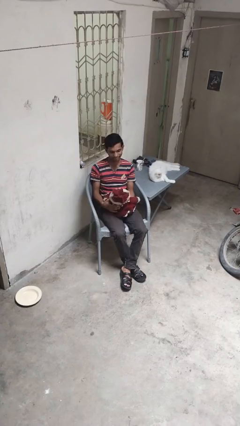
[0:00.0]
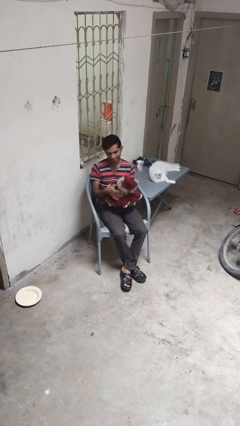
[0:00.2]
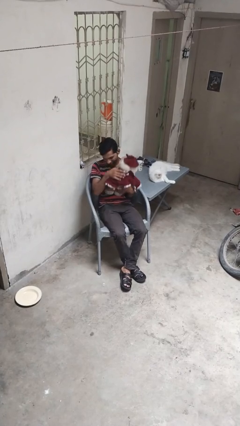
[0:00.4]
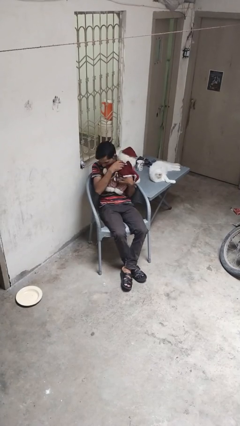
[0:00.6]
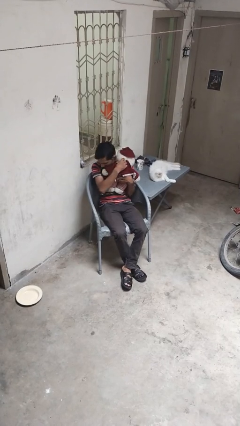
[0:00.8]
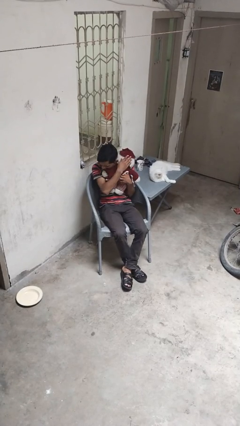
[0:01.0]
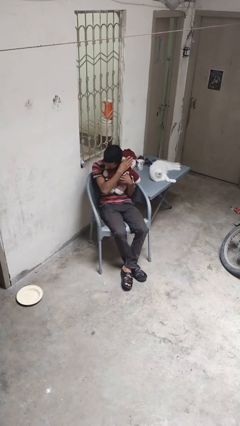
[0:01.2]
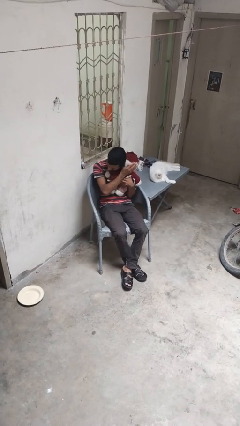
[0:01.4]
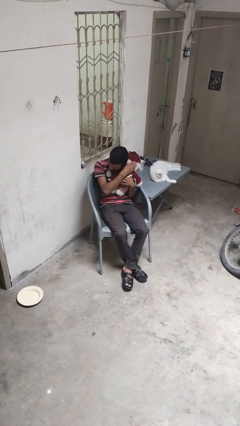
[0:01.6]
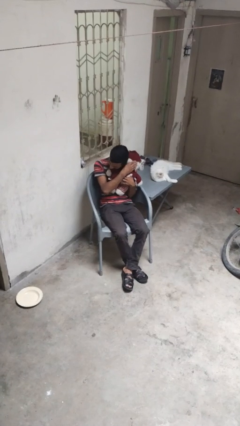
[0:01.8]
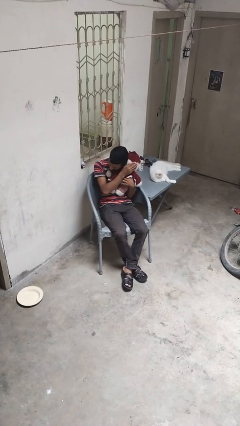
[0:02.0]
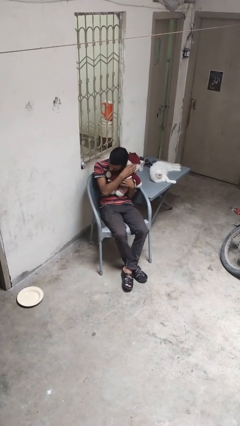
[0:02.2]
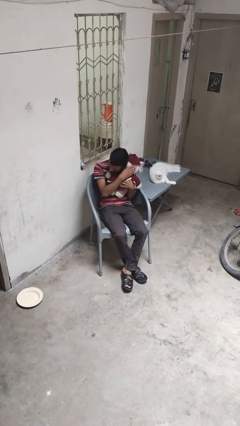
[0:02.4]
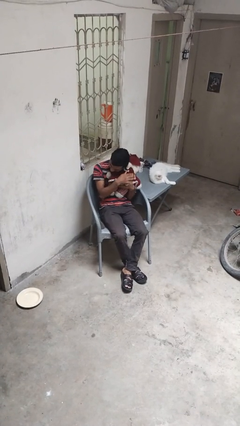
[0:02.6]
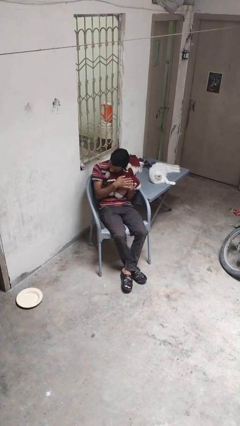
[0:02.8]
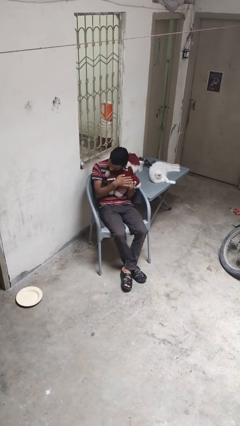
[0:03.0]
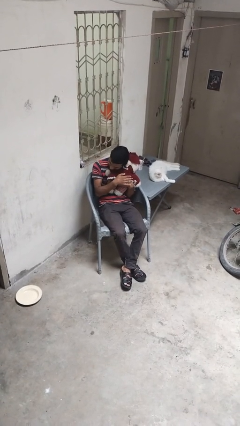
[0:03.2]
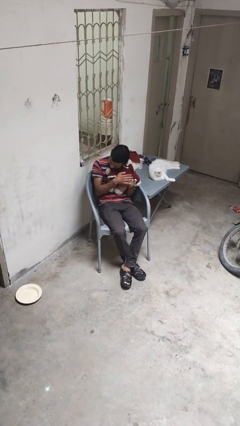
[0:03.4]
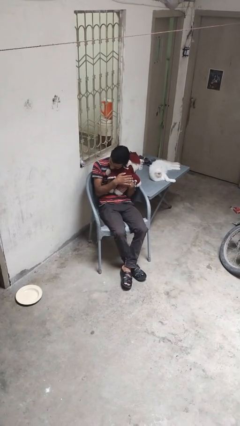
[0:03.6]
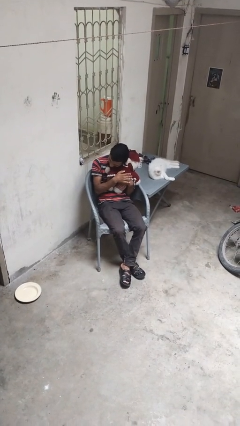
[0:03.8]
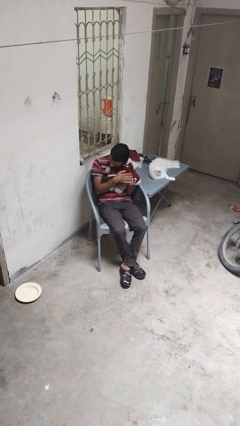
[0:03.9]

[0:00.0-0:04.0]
person hugs stuffed animal

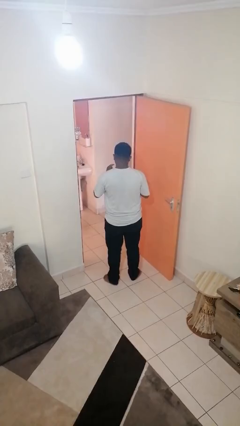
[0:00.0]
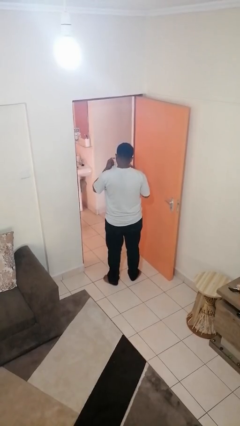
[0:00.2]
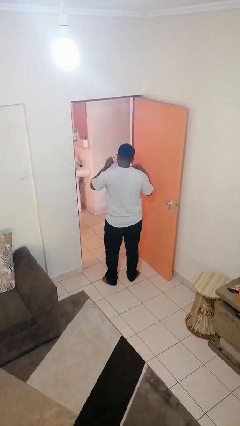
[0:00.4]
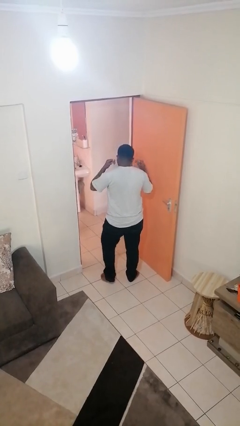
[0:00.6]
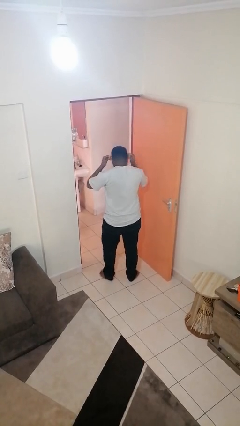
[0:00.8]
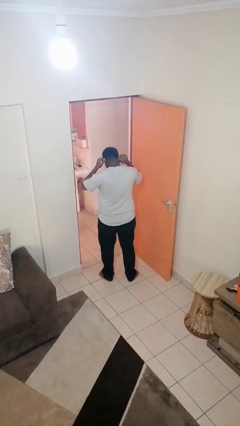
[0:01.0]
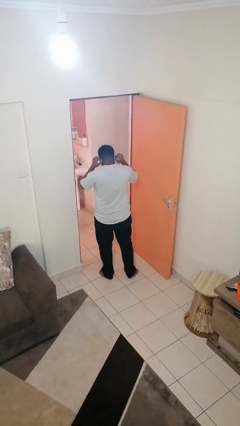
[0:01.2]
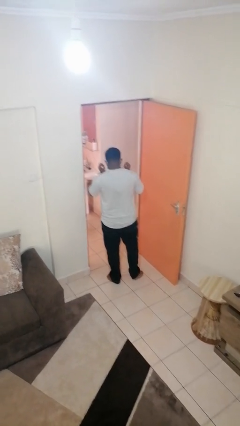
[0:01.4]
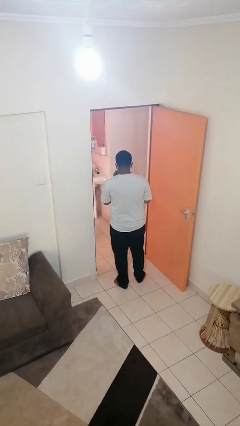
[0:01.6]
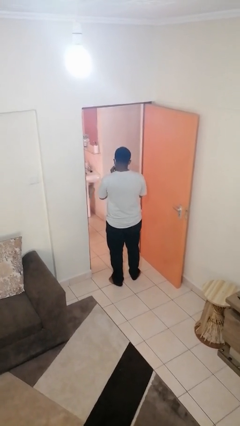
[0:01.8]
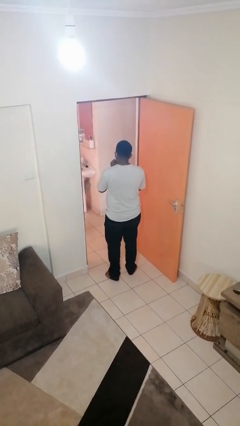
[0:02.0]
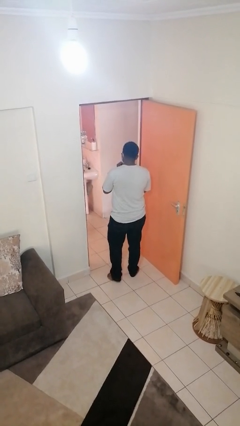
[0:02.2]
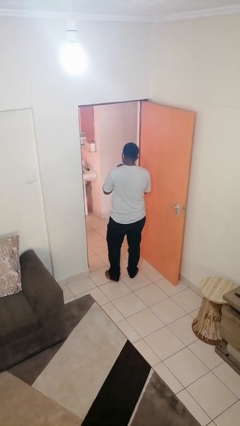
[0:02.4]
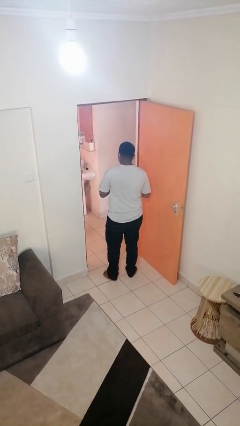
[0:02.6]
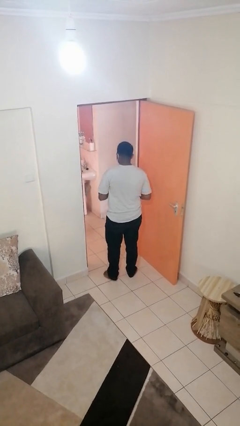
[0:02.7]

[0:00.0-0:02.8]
person puts on facemask

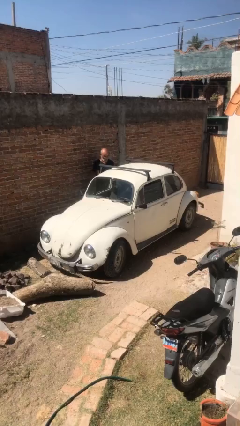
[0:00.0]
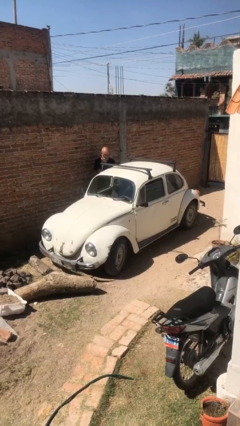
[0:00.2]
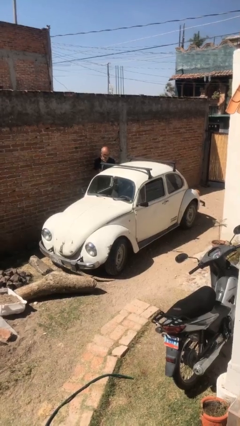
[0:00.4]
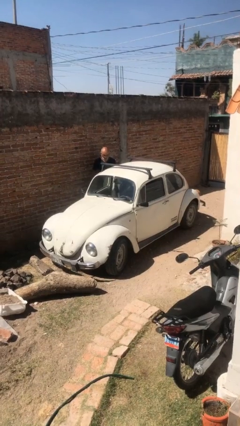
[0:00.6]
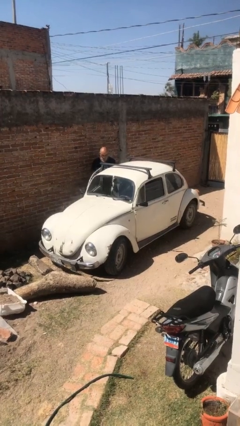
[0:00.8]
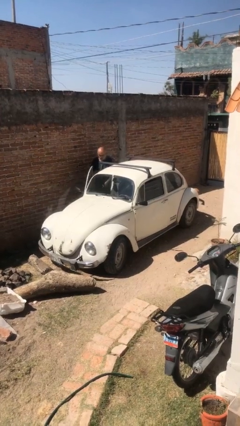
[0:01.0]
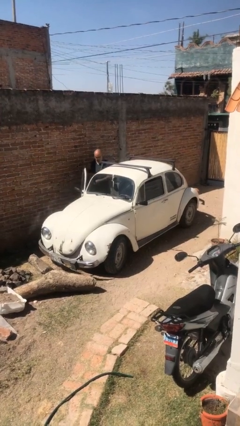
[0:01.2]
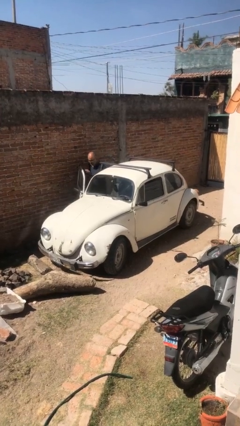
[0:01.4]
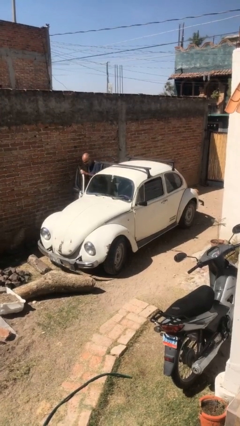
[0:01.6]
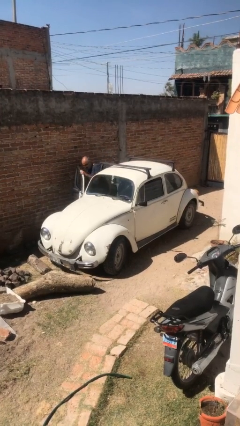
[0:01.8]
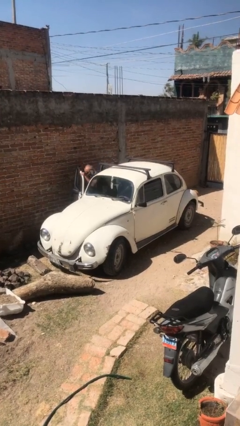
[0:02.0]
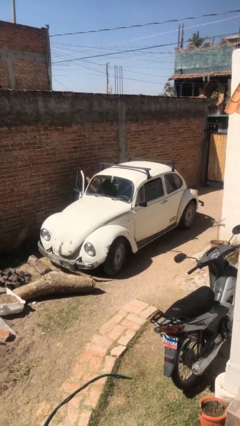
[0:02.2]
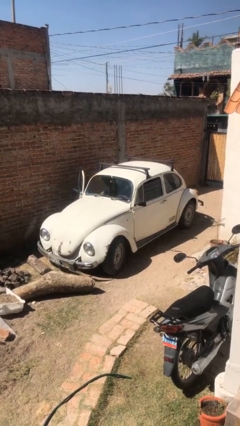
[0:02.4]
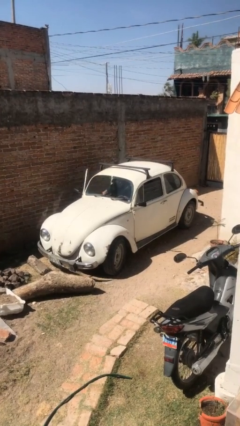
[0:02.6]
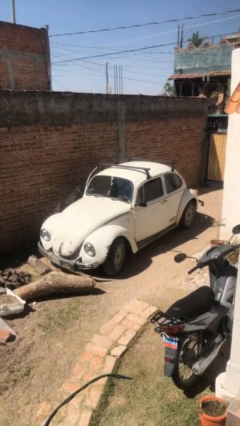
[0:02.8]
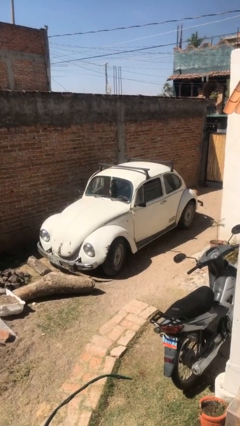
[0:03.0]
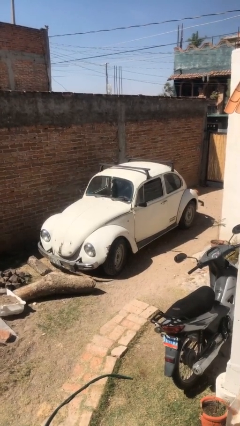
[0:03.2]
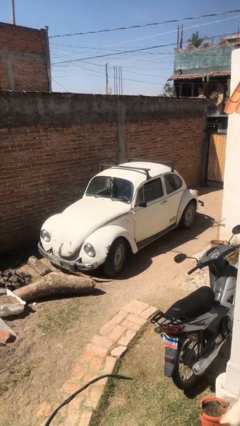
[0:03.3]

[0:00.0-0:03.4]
car picks up person

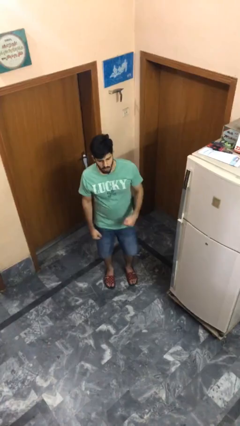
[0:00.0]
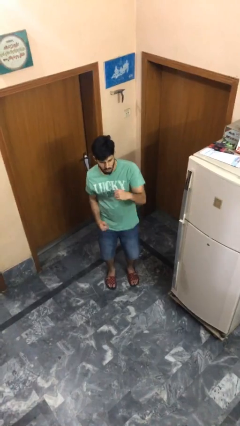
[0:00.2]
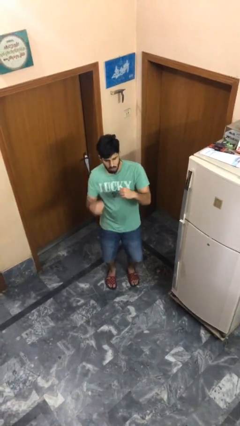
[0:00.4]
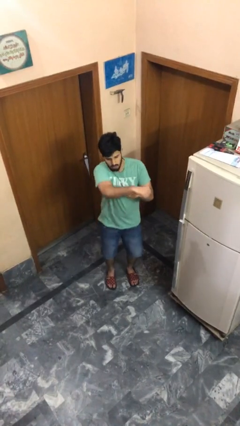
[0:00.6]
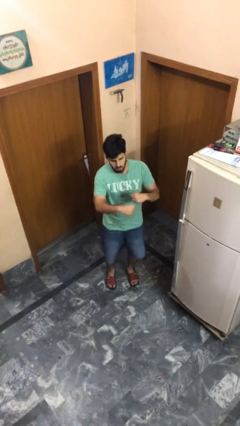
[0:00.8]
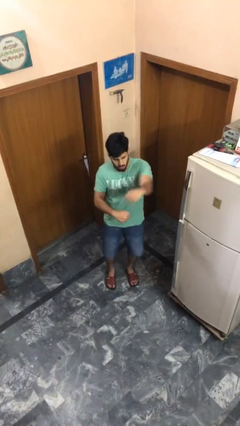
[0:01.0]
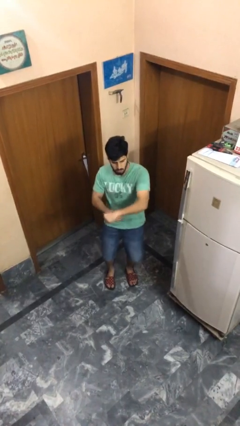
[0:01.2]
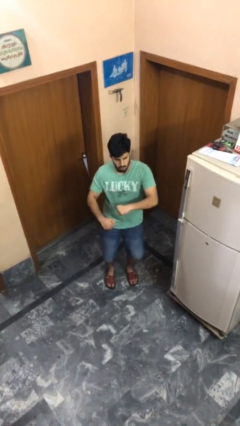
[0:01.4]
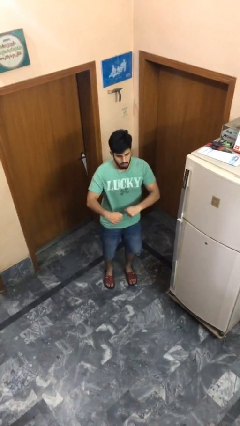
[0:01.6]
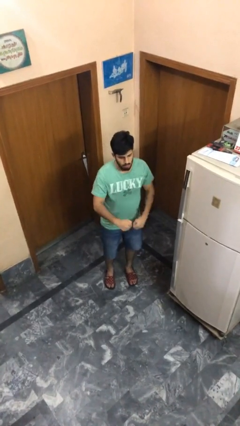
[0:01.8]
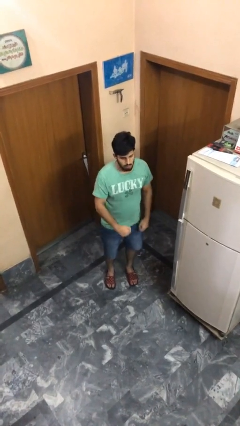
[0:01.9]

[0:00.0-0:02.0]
person punches

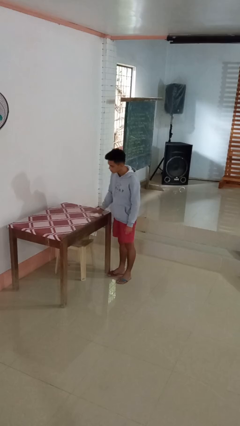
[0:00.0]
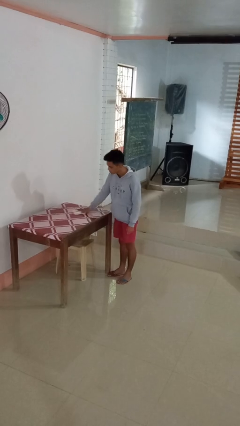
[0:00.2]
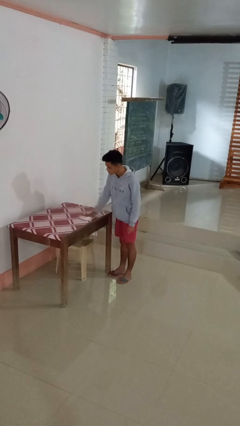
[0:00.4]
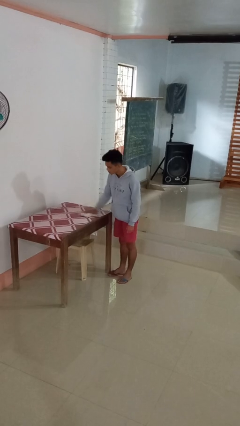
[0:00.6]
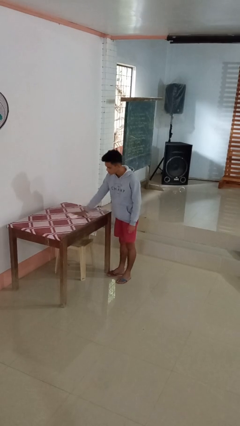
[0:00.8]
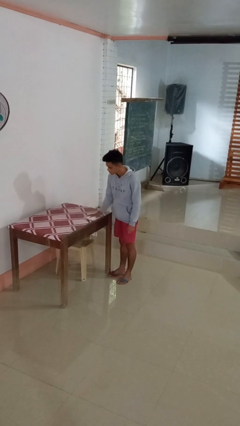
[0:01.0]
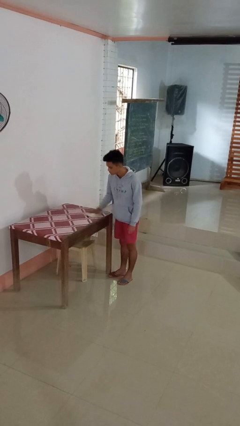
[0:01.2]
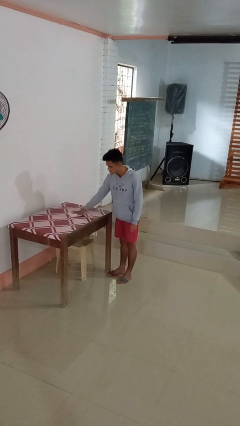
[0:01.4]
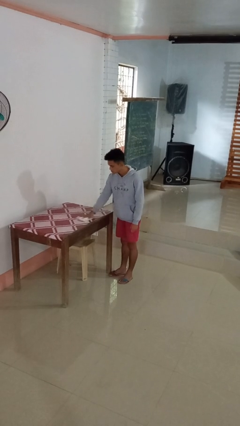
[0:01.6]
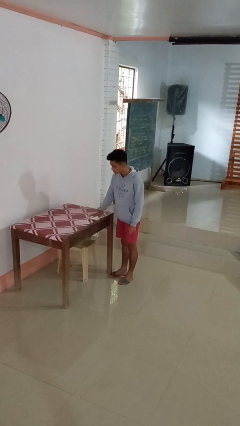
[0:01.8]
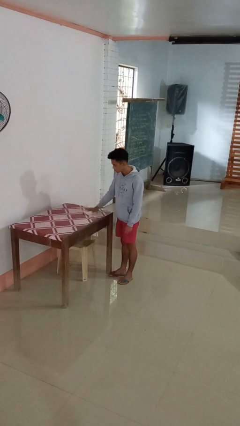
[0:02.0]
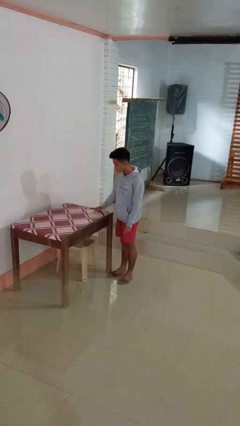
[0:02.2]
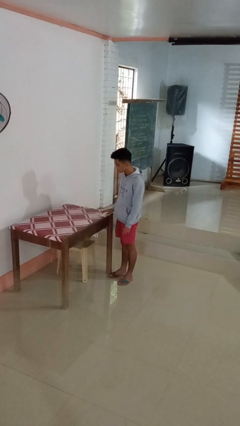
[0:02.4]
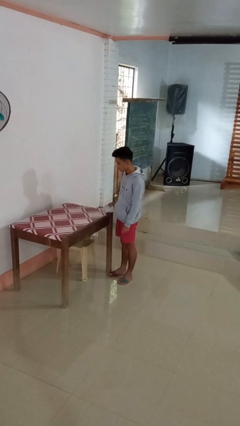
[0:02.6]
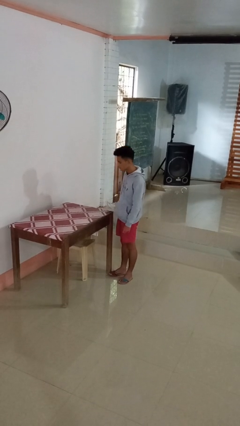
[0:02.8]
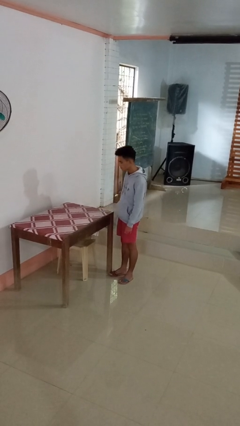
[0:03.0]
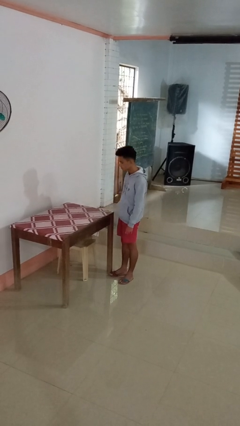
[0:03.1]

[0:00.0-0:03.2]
person cleans table with rag

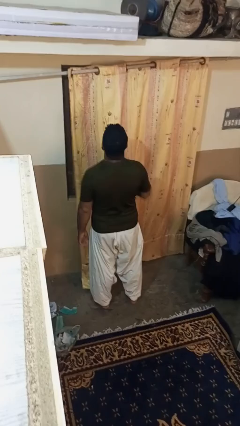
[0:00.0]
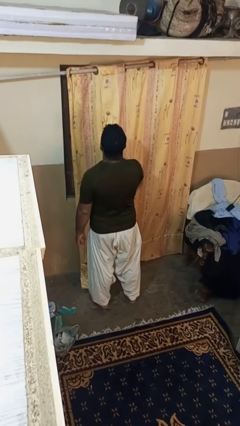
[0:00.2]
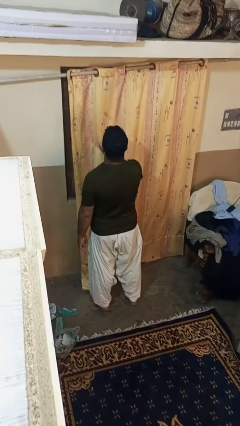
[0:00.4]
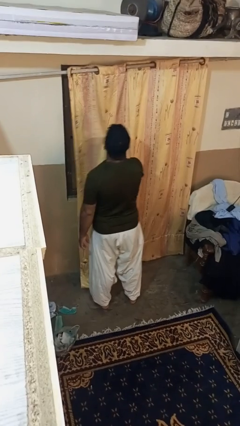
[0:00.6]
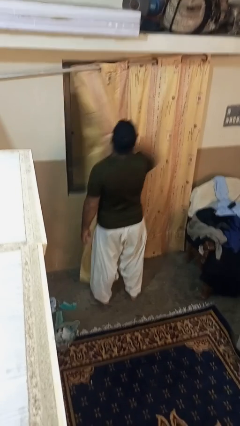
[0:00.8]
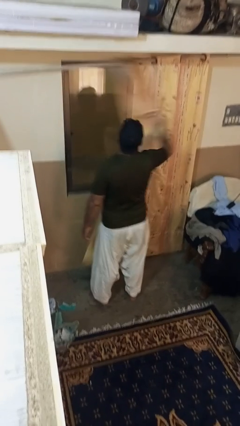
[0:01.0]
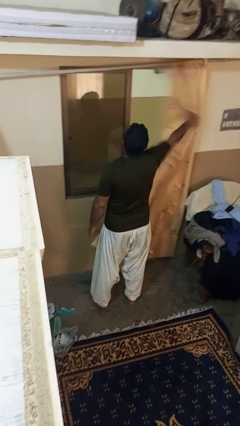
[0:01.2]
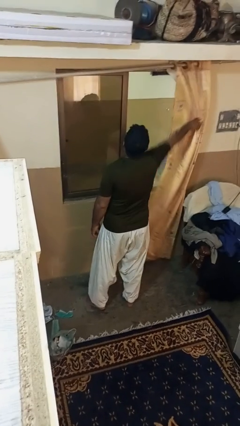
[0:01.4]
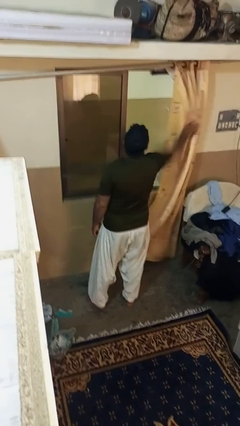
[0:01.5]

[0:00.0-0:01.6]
person opens curtains

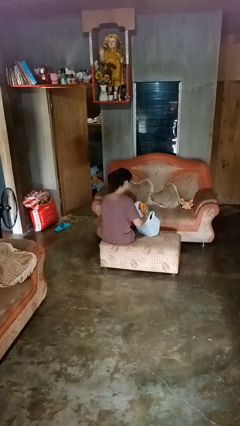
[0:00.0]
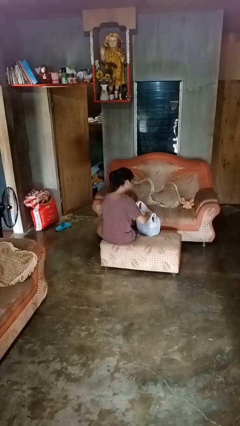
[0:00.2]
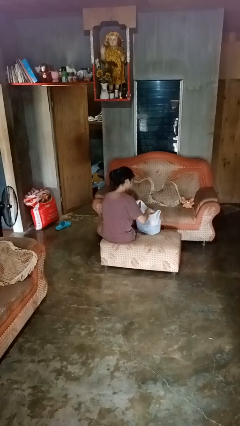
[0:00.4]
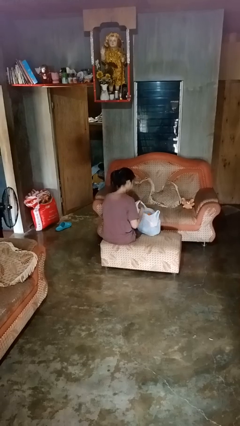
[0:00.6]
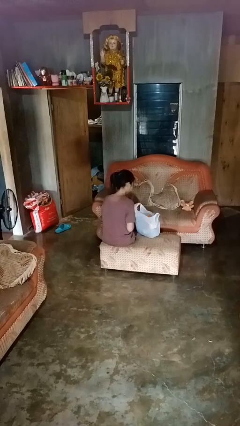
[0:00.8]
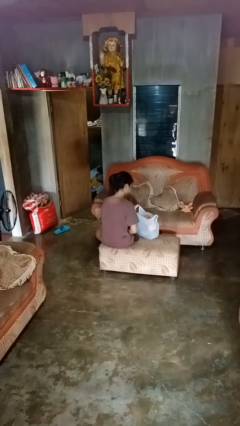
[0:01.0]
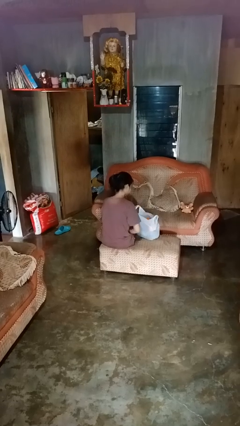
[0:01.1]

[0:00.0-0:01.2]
person puts object into bag
